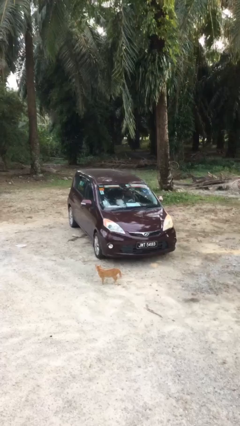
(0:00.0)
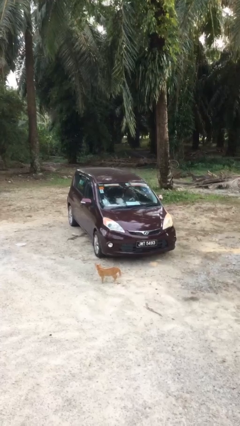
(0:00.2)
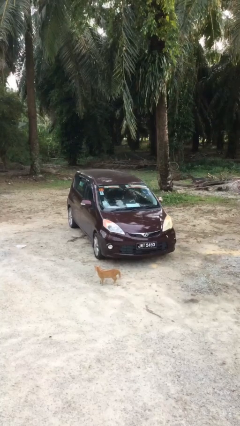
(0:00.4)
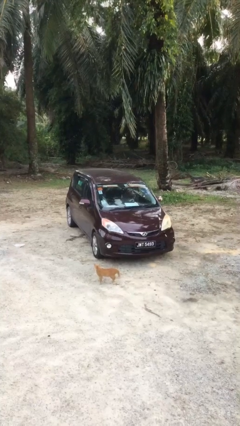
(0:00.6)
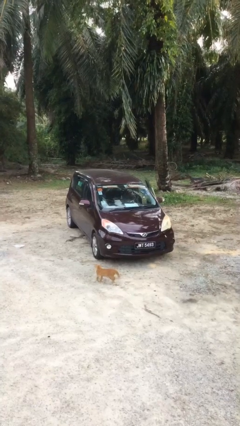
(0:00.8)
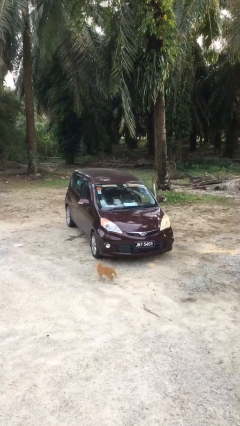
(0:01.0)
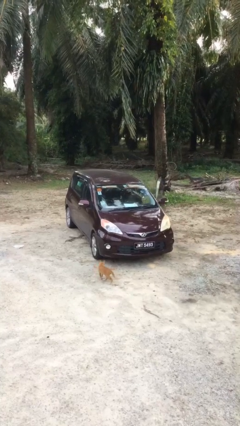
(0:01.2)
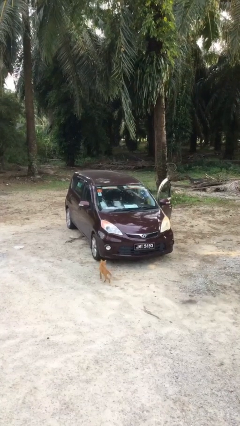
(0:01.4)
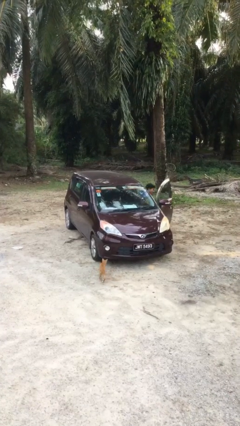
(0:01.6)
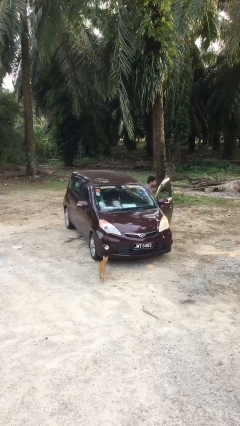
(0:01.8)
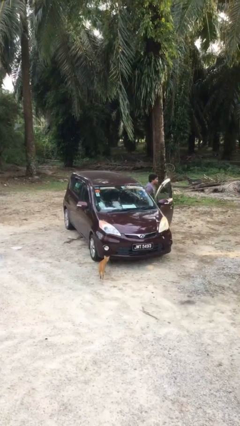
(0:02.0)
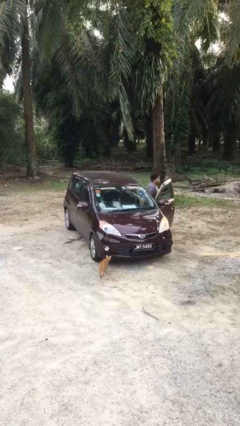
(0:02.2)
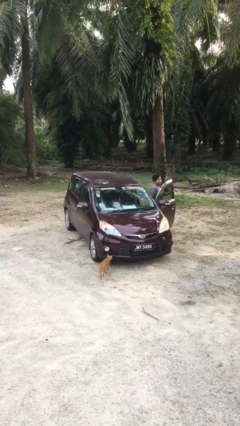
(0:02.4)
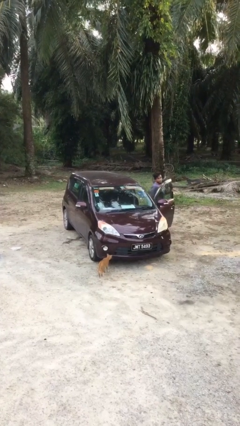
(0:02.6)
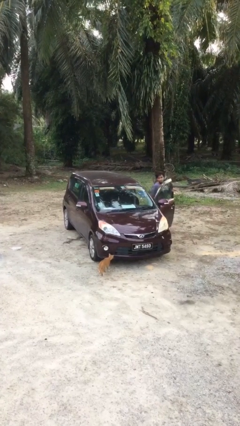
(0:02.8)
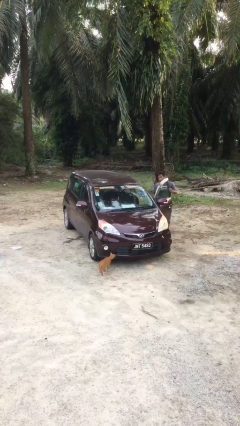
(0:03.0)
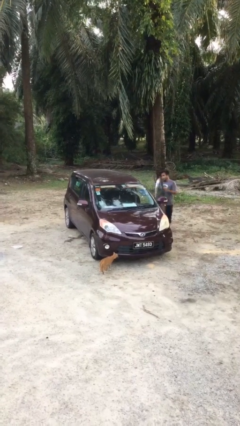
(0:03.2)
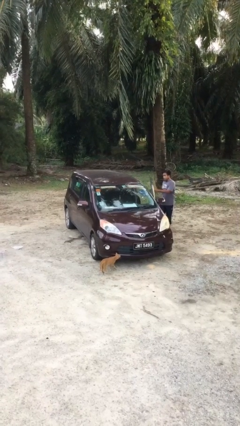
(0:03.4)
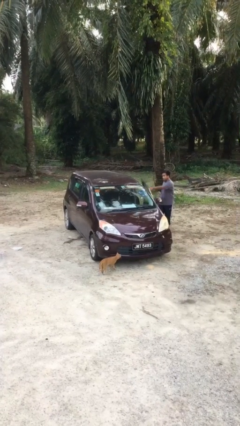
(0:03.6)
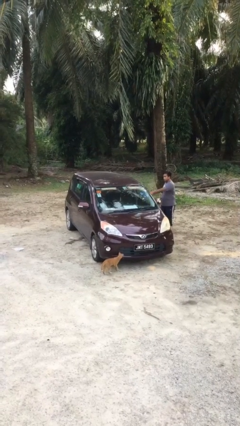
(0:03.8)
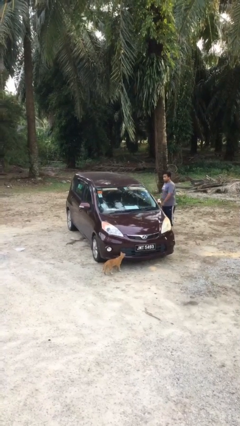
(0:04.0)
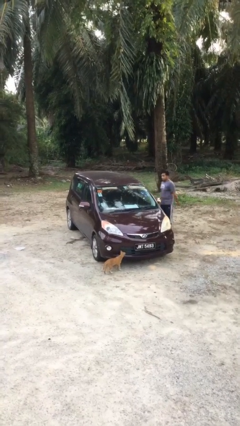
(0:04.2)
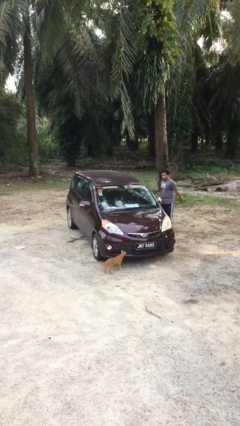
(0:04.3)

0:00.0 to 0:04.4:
car drops off person

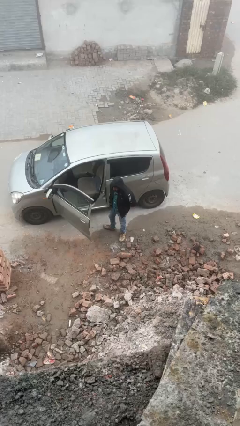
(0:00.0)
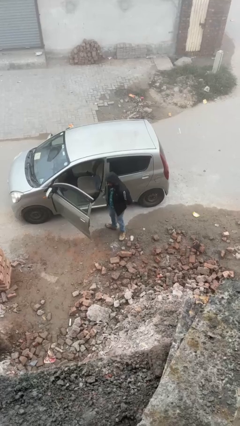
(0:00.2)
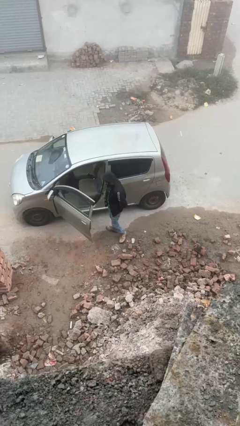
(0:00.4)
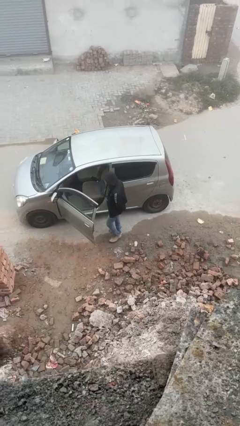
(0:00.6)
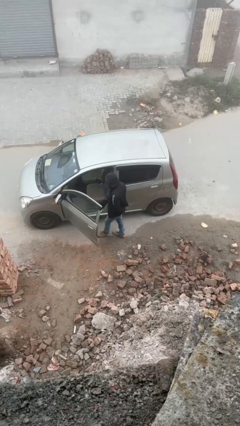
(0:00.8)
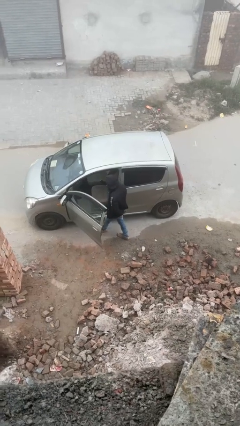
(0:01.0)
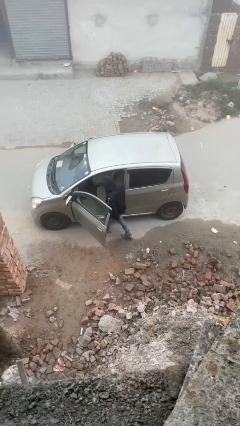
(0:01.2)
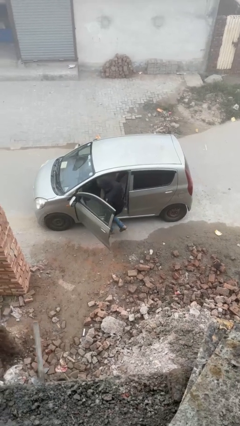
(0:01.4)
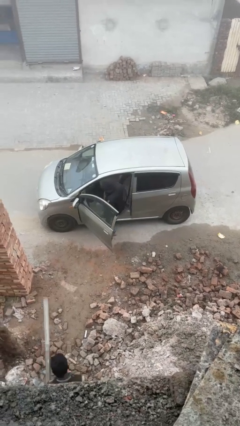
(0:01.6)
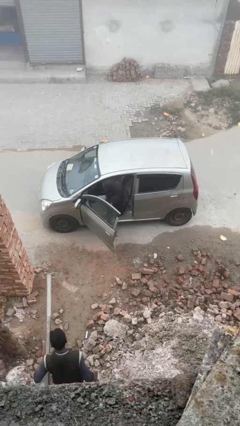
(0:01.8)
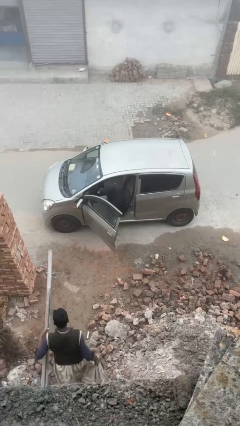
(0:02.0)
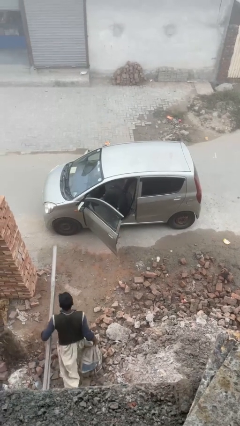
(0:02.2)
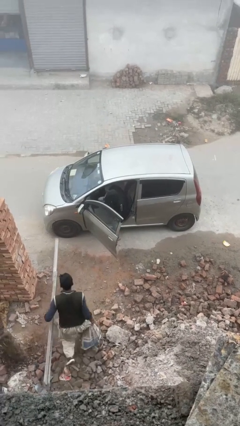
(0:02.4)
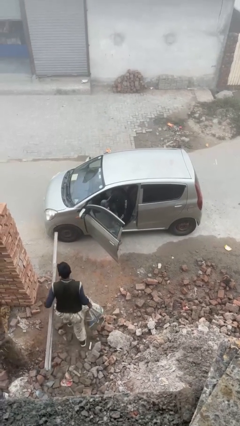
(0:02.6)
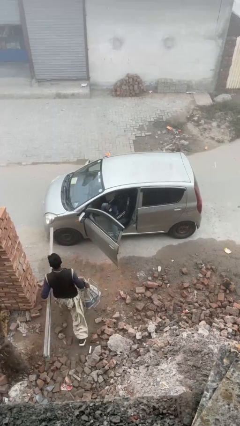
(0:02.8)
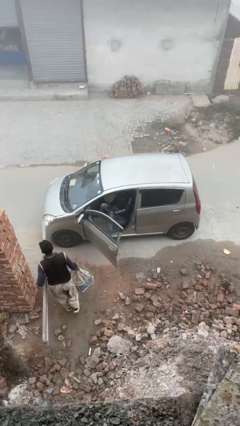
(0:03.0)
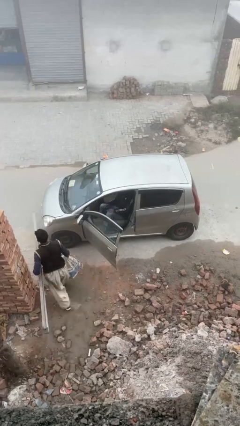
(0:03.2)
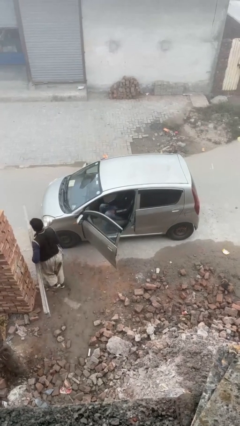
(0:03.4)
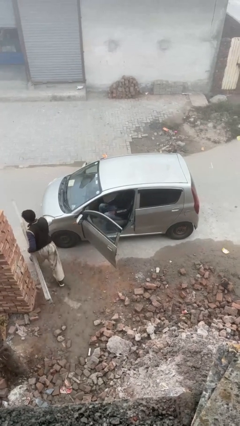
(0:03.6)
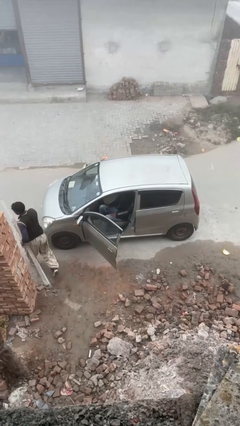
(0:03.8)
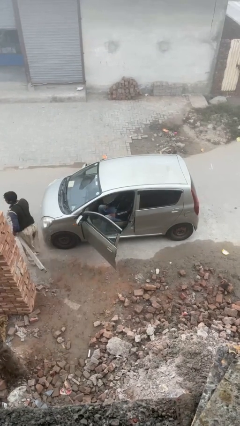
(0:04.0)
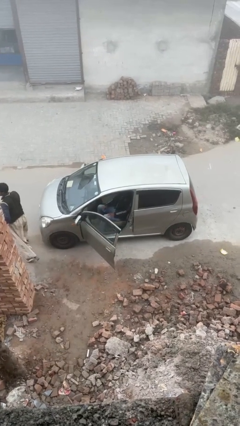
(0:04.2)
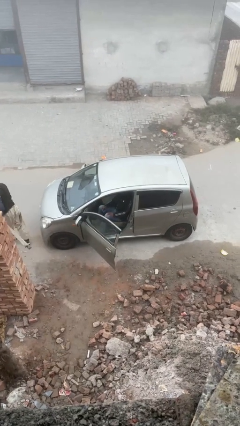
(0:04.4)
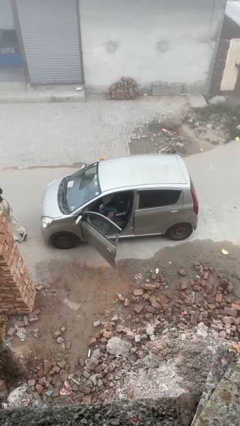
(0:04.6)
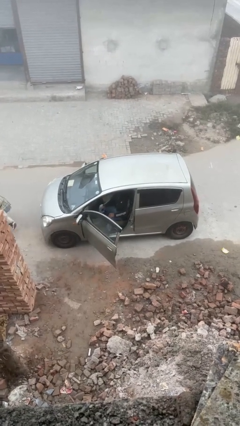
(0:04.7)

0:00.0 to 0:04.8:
person enters car

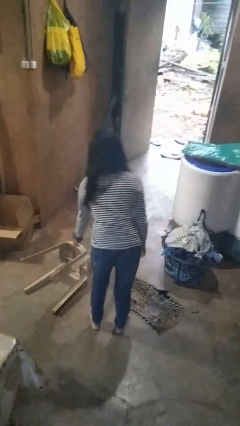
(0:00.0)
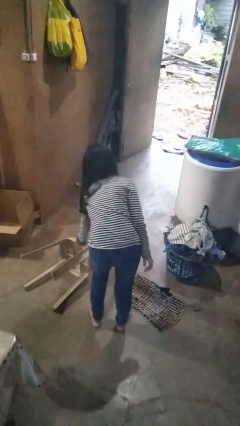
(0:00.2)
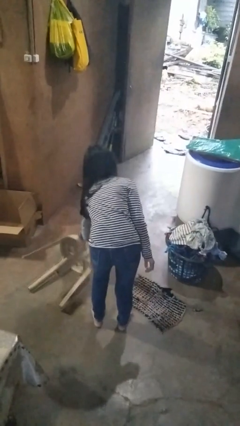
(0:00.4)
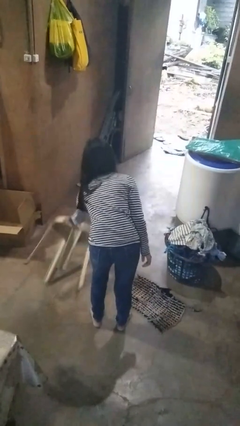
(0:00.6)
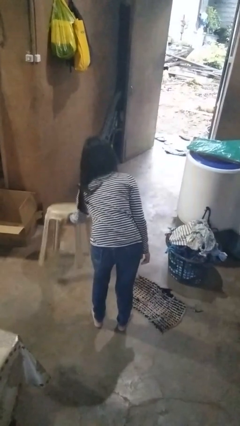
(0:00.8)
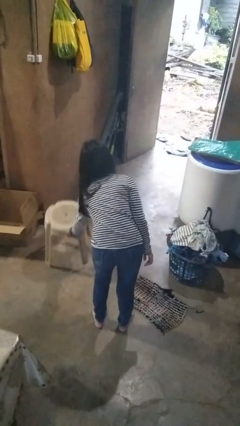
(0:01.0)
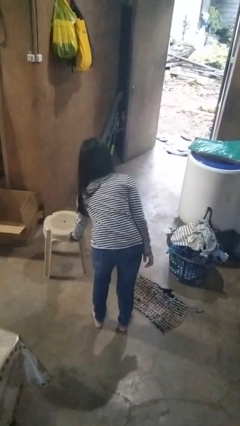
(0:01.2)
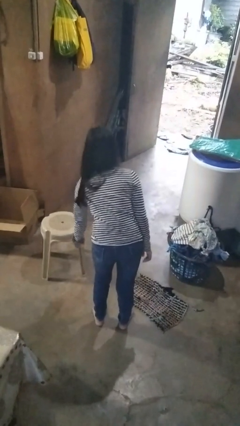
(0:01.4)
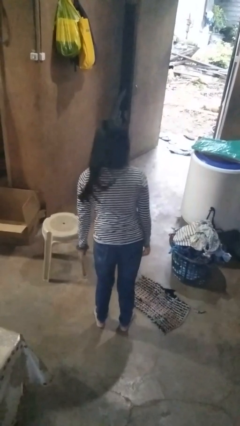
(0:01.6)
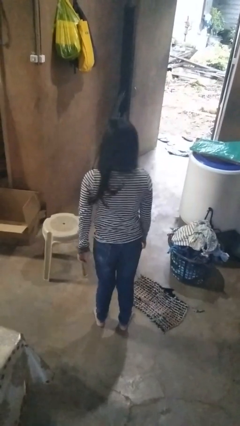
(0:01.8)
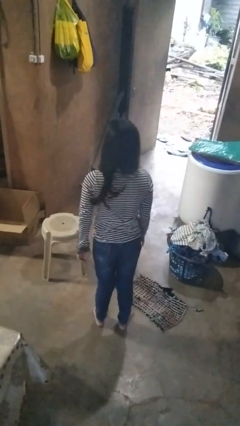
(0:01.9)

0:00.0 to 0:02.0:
person sets upright furniture

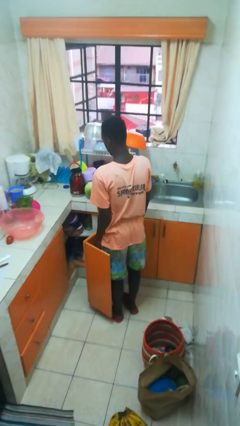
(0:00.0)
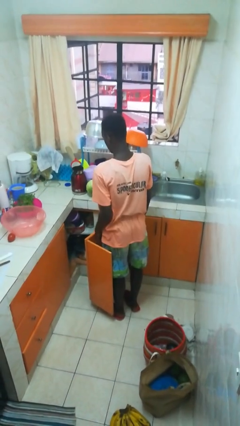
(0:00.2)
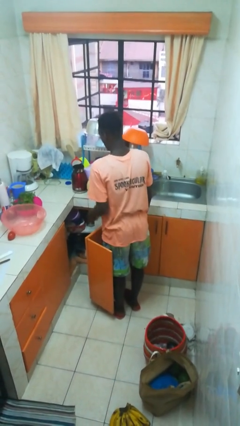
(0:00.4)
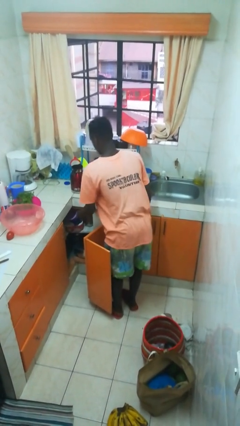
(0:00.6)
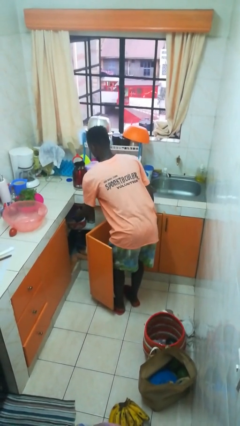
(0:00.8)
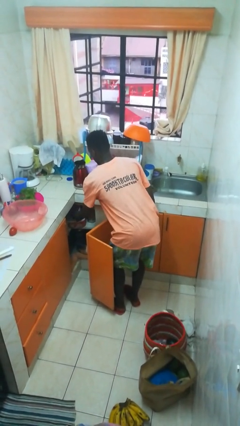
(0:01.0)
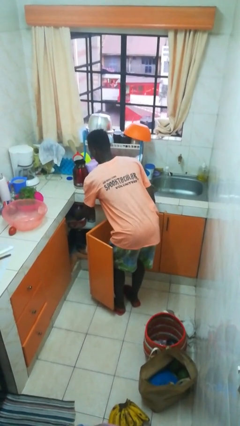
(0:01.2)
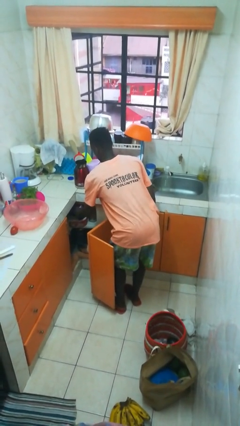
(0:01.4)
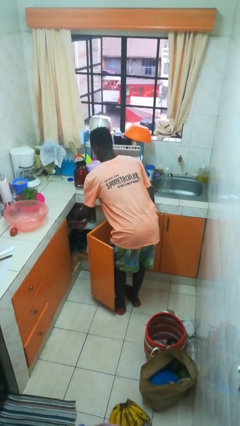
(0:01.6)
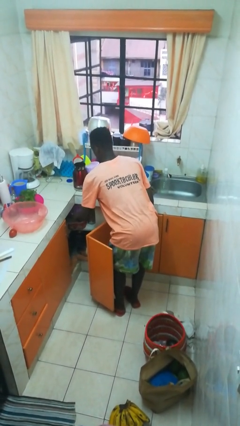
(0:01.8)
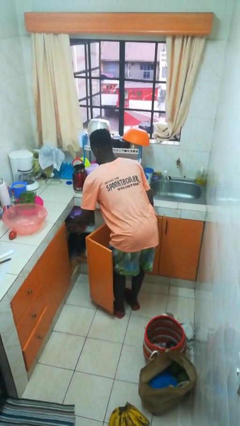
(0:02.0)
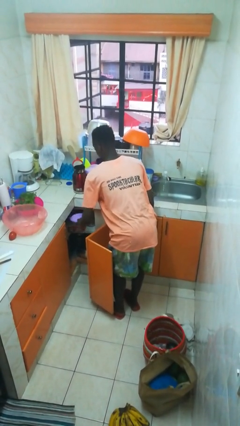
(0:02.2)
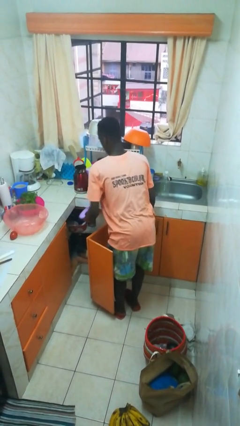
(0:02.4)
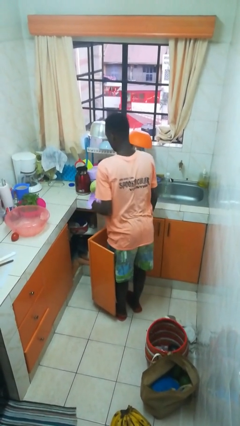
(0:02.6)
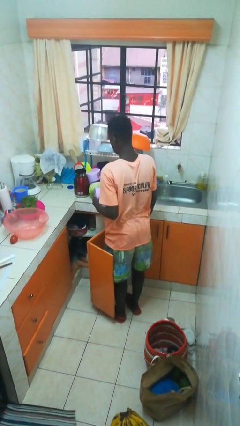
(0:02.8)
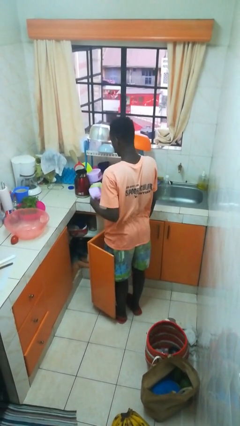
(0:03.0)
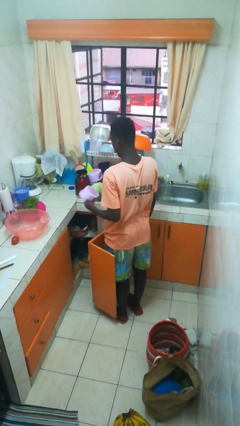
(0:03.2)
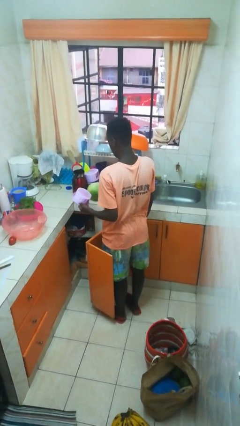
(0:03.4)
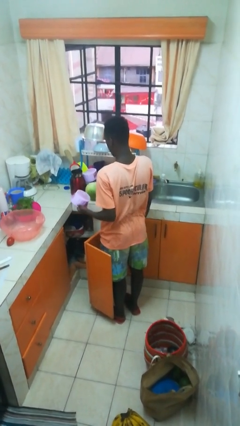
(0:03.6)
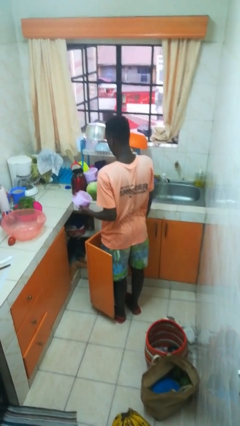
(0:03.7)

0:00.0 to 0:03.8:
person takes object from cabinet

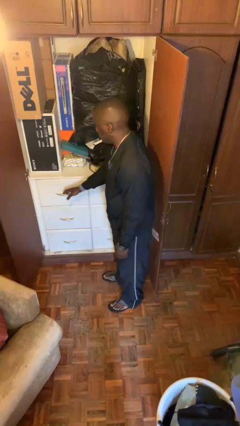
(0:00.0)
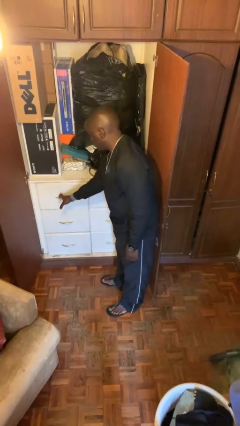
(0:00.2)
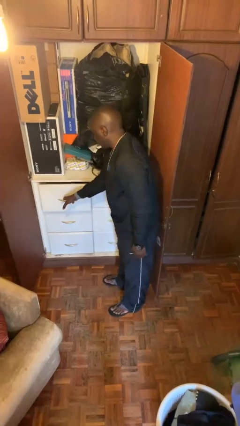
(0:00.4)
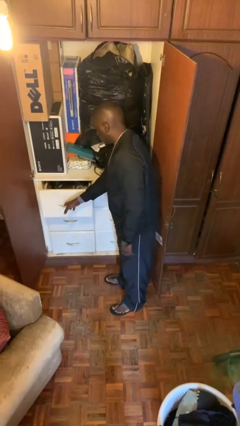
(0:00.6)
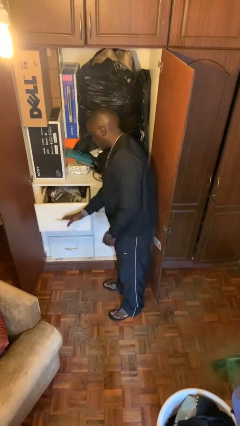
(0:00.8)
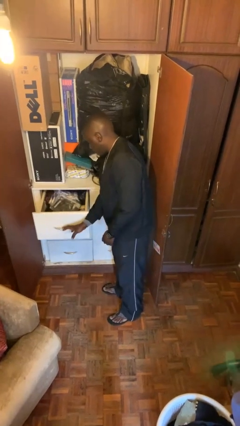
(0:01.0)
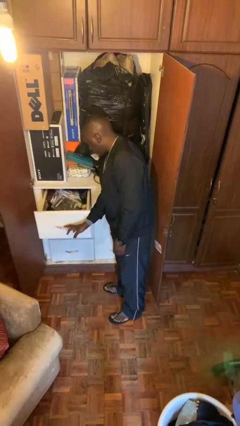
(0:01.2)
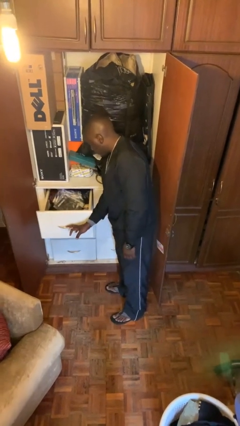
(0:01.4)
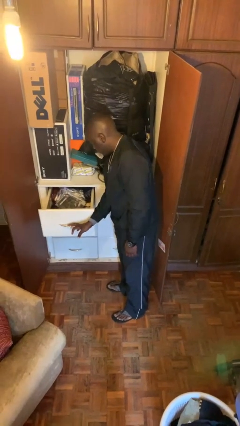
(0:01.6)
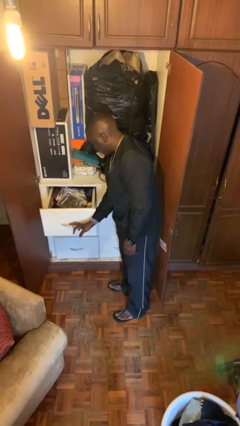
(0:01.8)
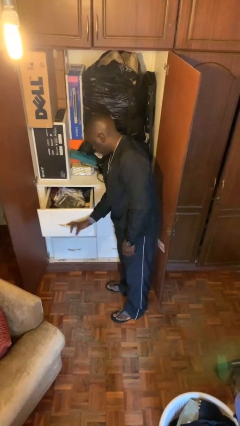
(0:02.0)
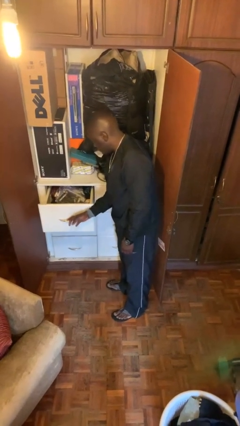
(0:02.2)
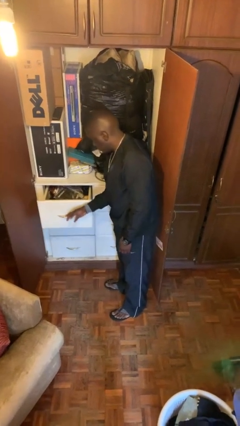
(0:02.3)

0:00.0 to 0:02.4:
person opens dresser drawer

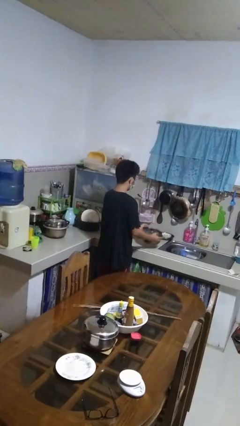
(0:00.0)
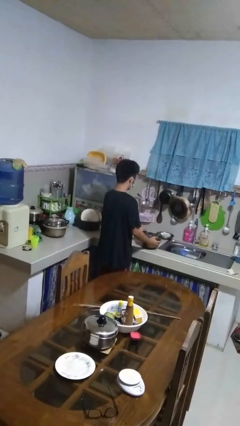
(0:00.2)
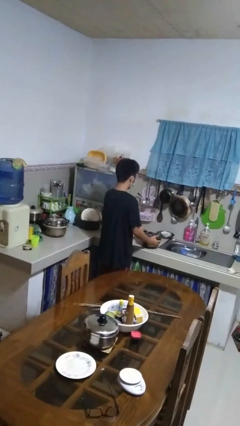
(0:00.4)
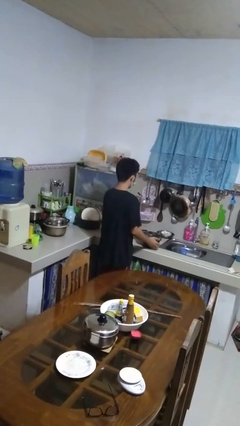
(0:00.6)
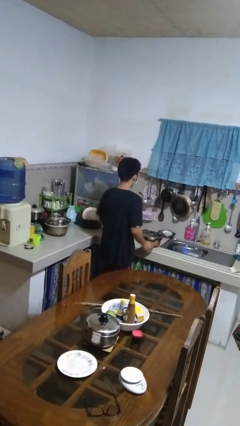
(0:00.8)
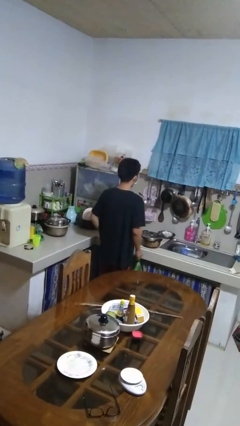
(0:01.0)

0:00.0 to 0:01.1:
person puts down object on countertop
